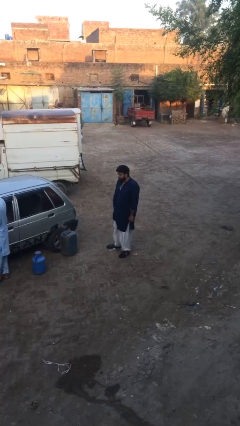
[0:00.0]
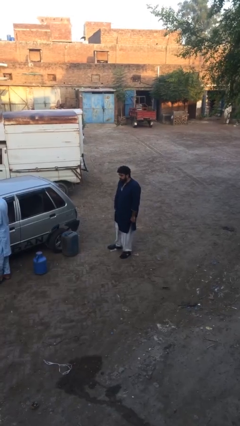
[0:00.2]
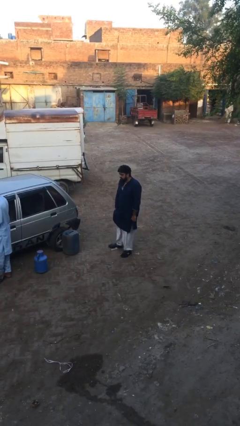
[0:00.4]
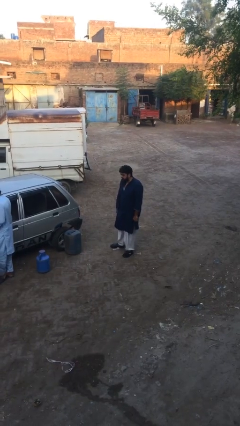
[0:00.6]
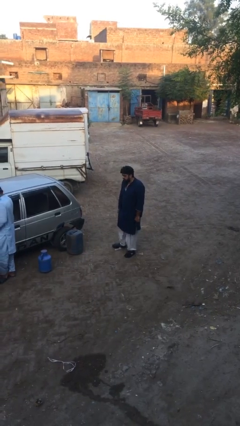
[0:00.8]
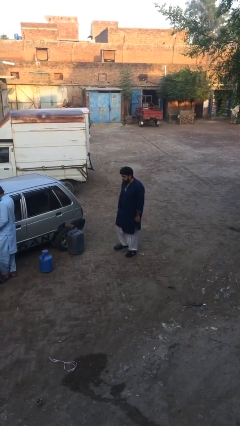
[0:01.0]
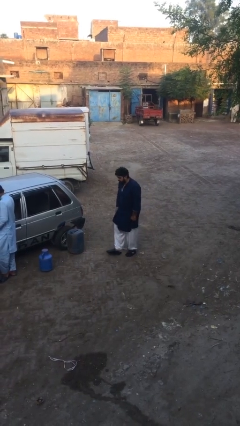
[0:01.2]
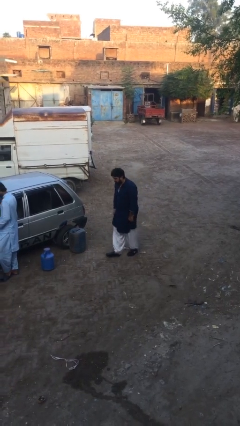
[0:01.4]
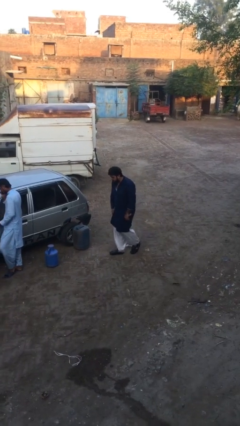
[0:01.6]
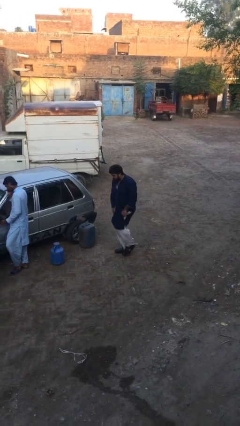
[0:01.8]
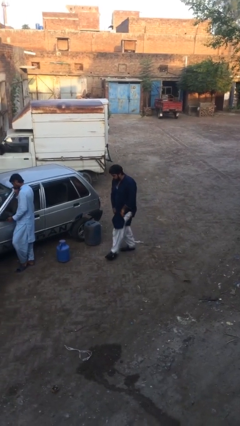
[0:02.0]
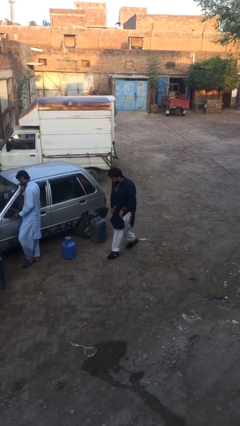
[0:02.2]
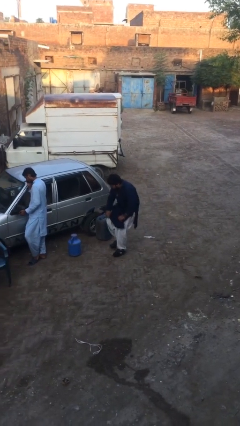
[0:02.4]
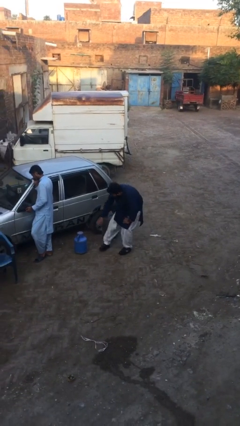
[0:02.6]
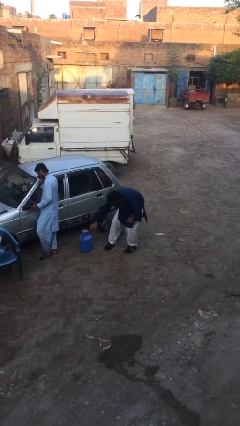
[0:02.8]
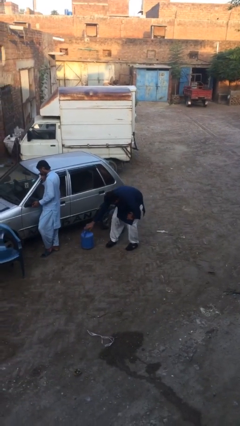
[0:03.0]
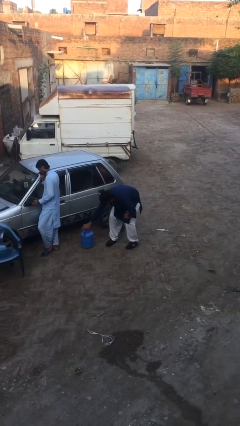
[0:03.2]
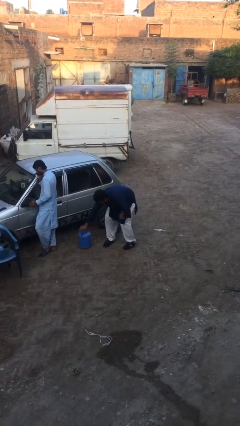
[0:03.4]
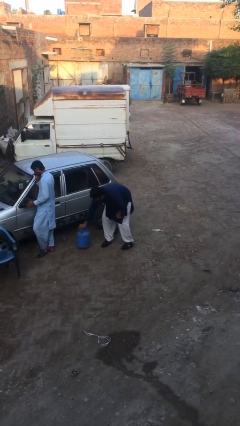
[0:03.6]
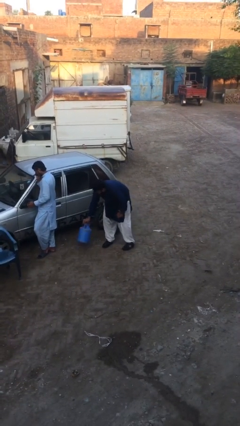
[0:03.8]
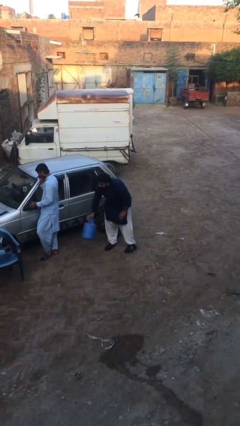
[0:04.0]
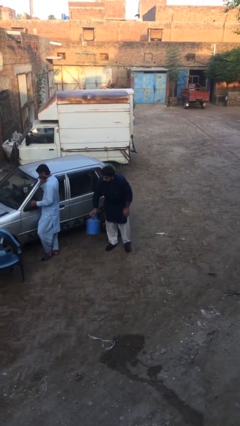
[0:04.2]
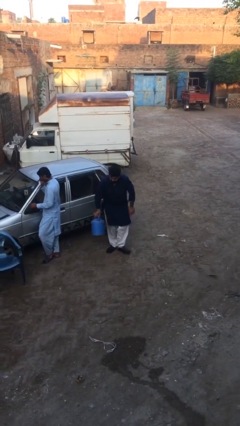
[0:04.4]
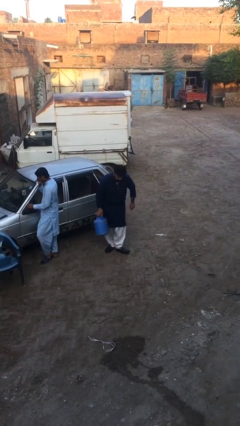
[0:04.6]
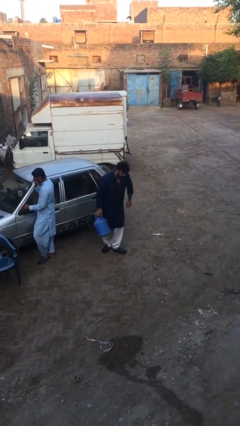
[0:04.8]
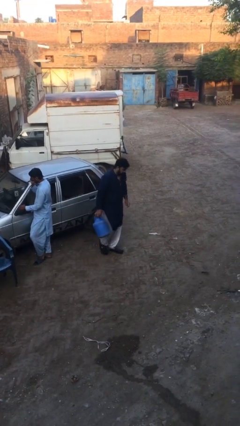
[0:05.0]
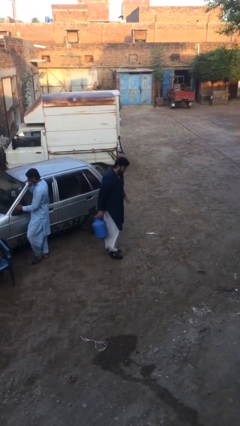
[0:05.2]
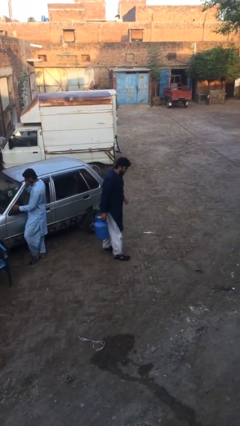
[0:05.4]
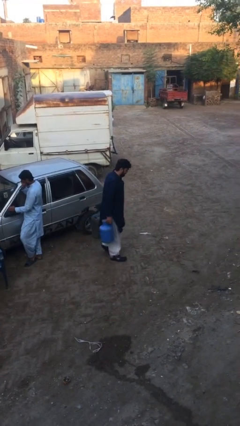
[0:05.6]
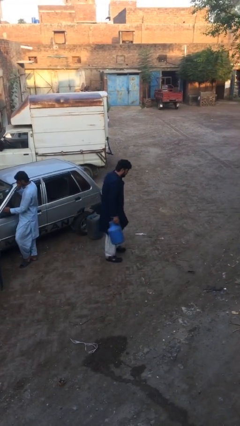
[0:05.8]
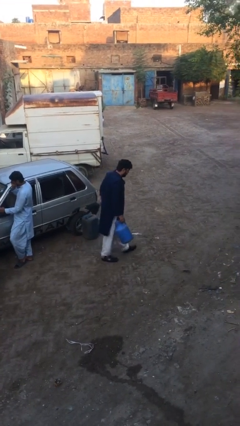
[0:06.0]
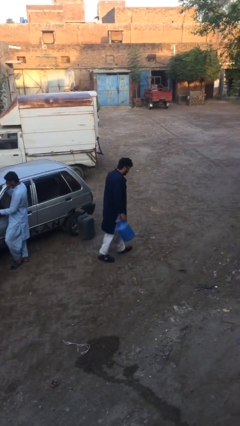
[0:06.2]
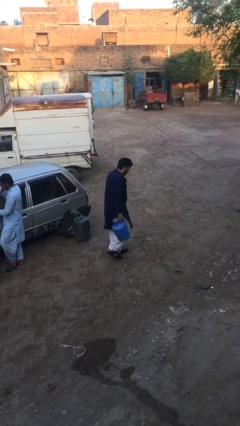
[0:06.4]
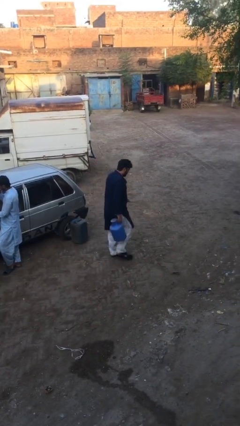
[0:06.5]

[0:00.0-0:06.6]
person steals object from person

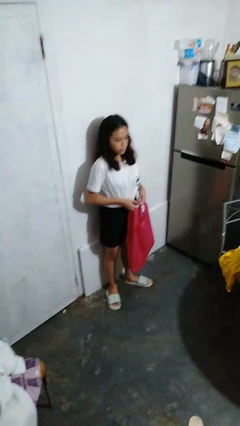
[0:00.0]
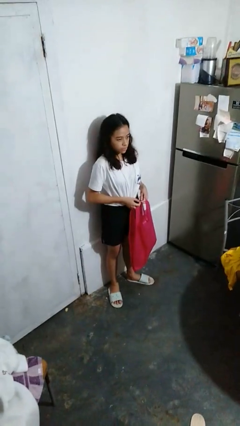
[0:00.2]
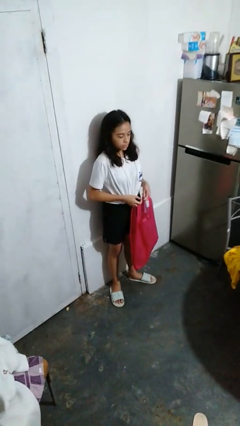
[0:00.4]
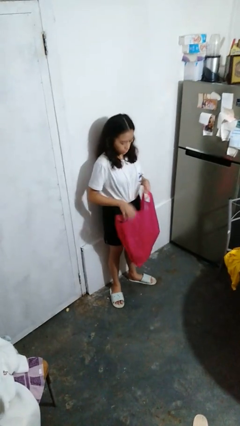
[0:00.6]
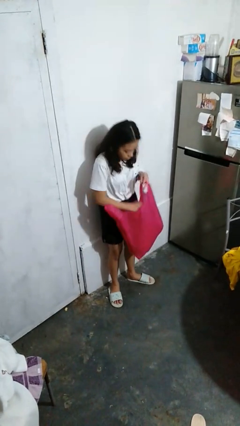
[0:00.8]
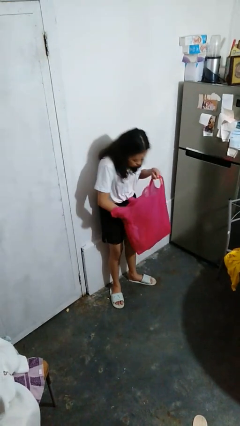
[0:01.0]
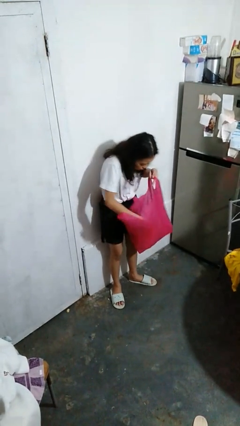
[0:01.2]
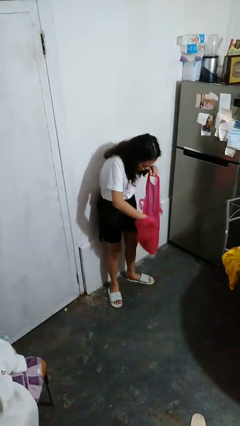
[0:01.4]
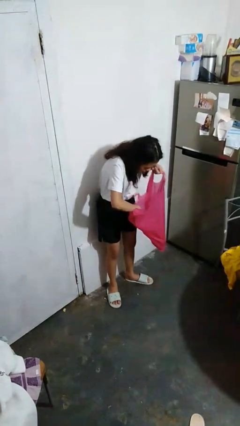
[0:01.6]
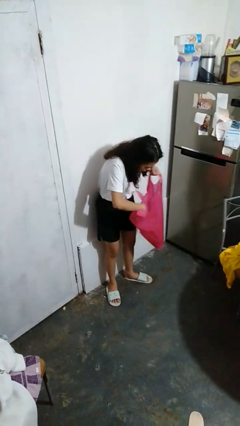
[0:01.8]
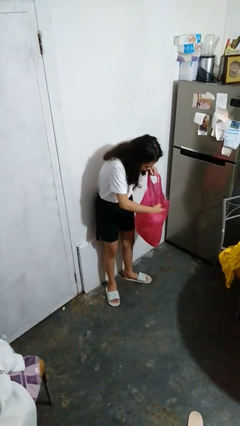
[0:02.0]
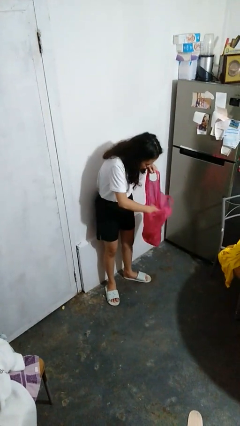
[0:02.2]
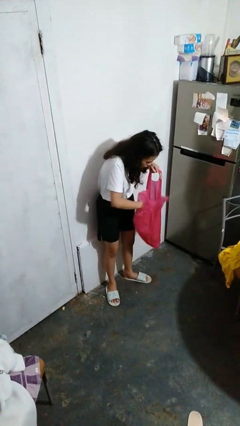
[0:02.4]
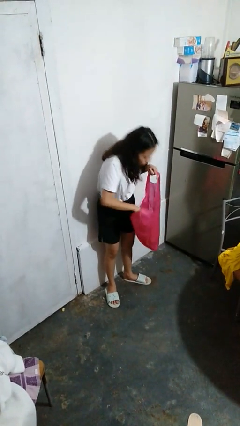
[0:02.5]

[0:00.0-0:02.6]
person searches in bag

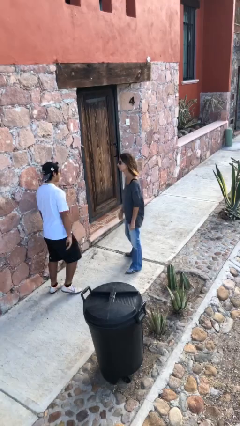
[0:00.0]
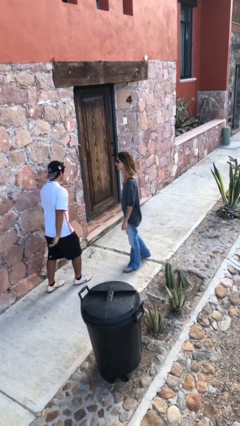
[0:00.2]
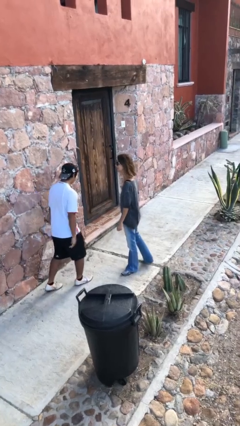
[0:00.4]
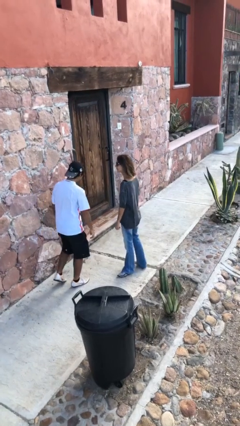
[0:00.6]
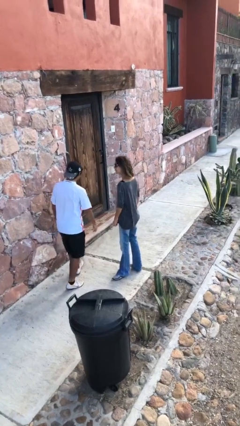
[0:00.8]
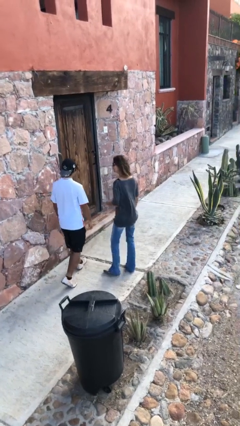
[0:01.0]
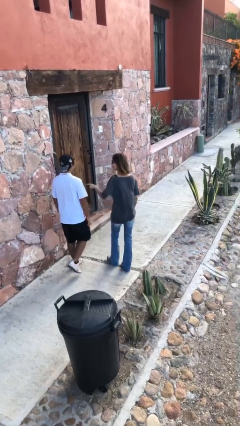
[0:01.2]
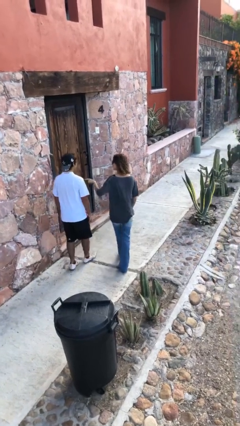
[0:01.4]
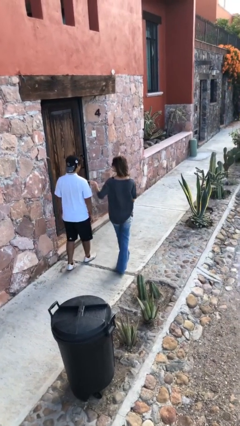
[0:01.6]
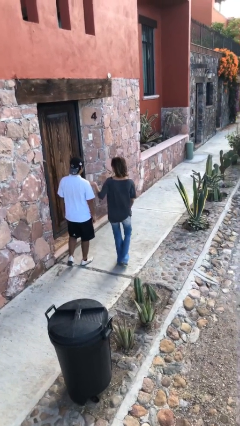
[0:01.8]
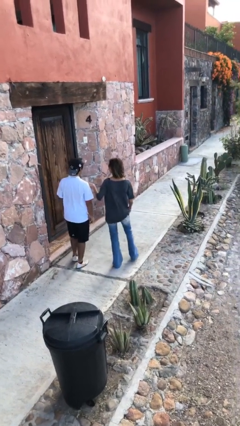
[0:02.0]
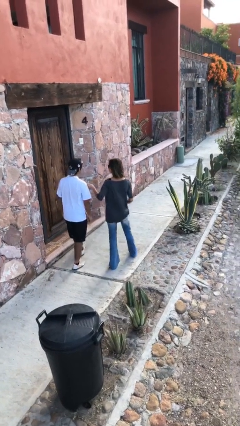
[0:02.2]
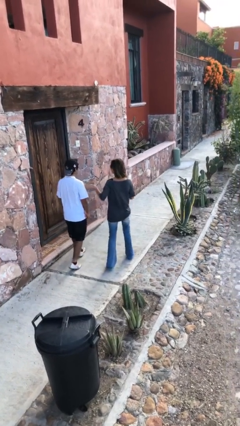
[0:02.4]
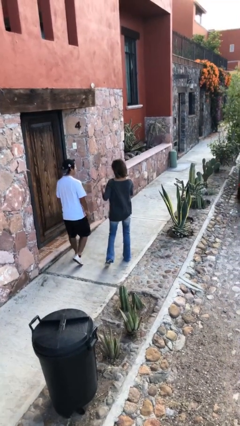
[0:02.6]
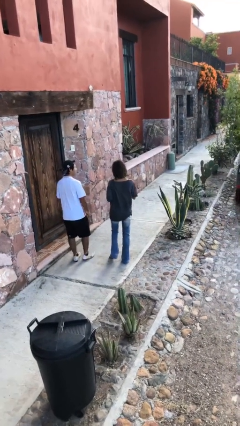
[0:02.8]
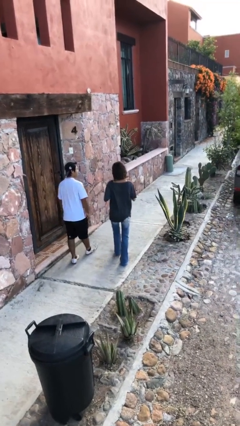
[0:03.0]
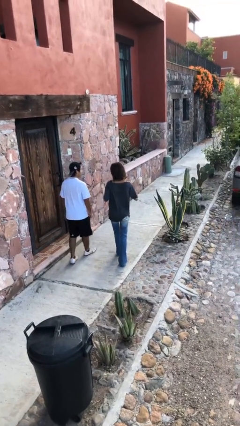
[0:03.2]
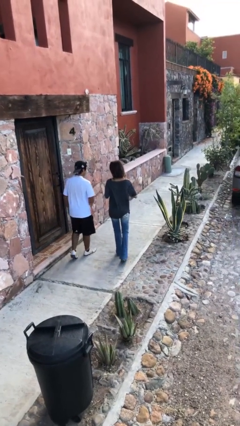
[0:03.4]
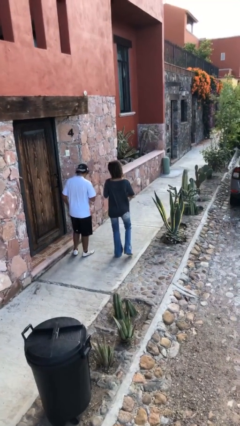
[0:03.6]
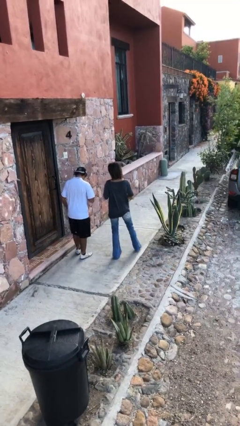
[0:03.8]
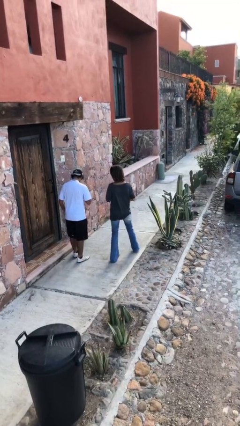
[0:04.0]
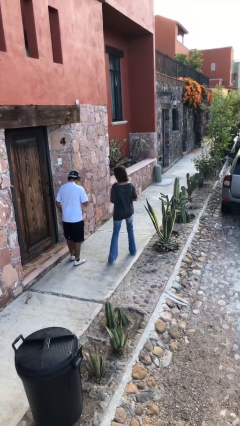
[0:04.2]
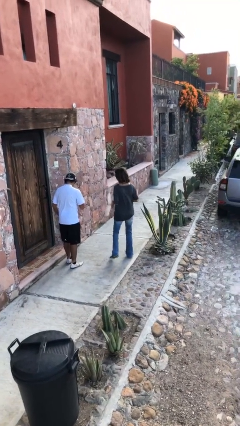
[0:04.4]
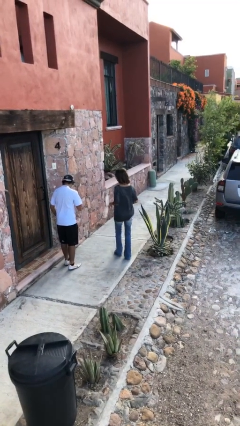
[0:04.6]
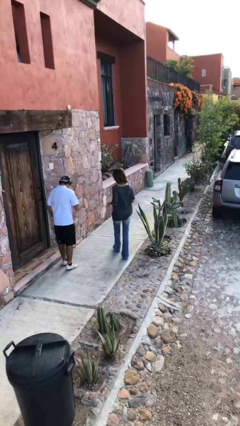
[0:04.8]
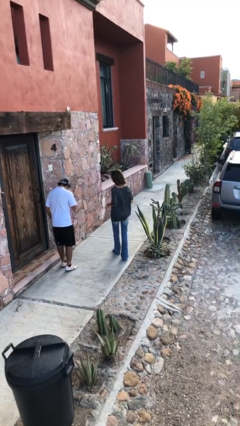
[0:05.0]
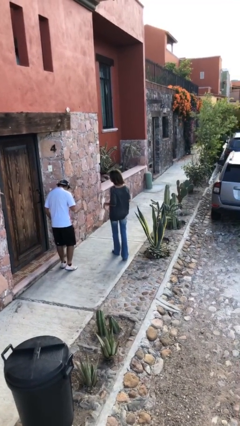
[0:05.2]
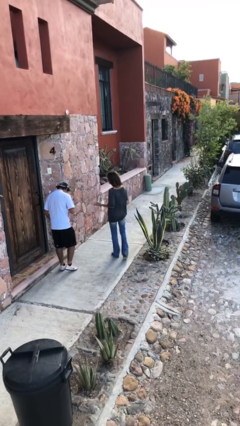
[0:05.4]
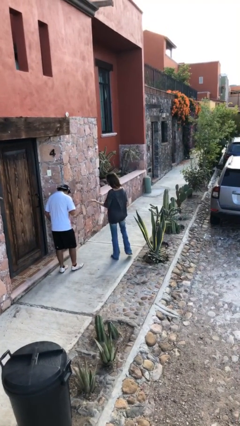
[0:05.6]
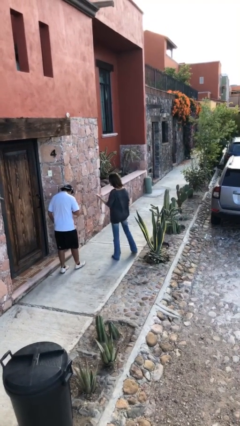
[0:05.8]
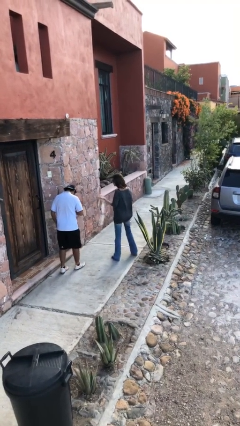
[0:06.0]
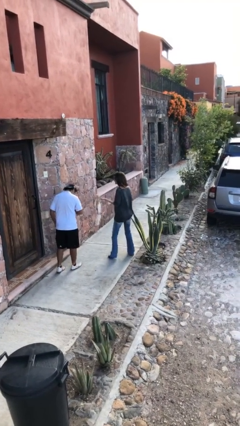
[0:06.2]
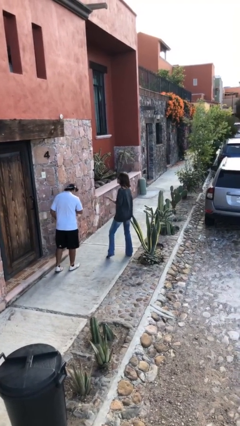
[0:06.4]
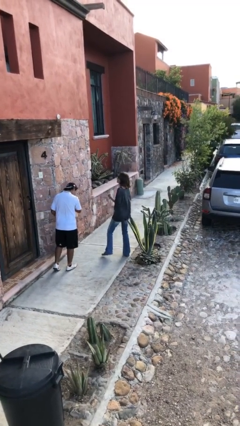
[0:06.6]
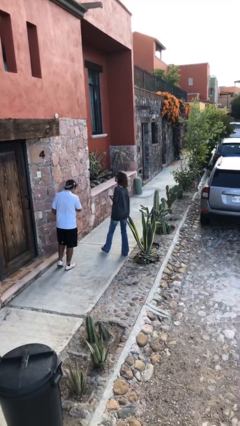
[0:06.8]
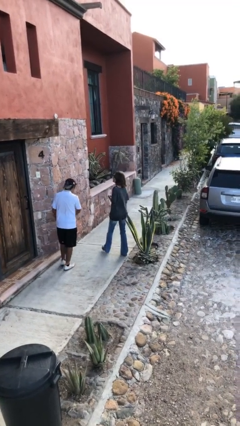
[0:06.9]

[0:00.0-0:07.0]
person talks to person

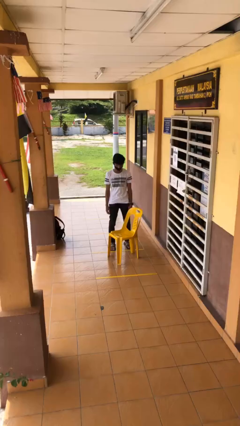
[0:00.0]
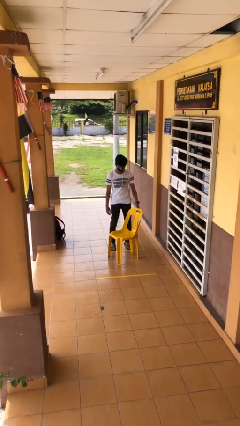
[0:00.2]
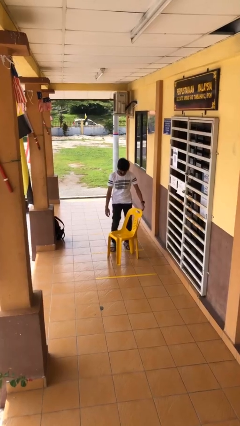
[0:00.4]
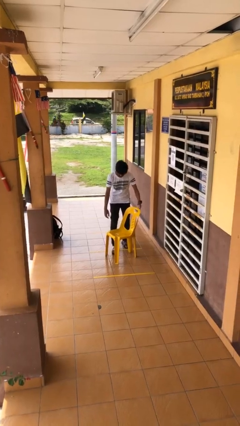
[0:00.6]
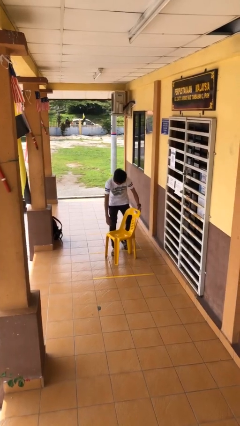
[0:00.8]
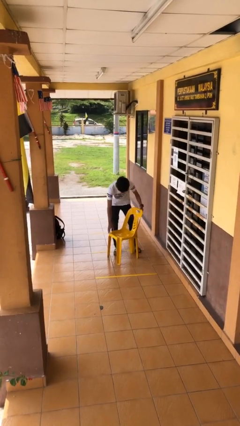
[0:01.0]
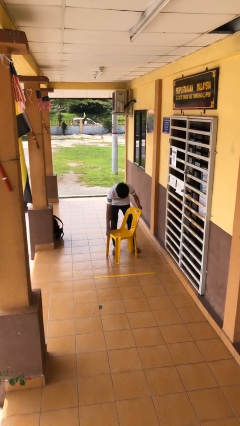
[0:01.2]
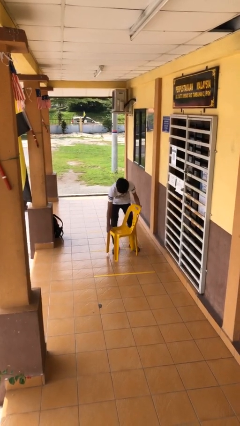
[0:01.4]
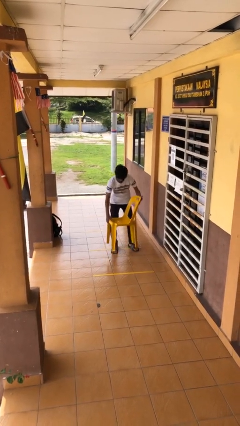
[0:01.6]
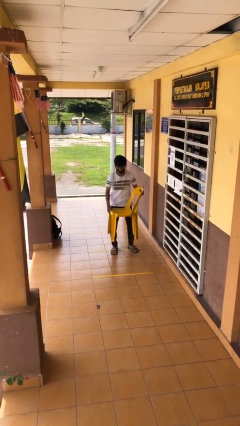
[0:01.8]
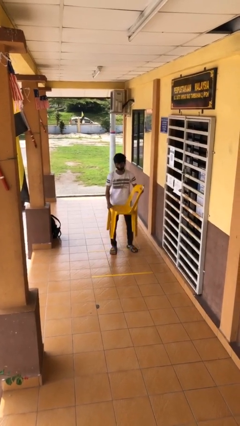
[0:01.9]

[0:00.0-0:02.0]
person picks up object from floor
